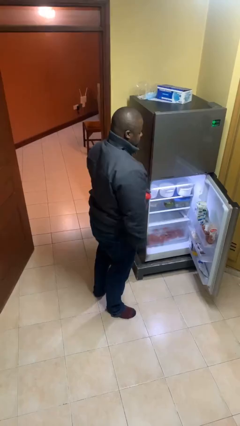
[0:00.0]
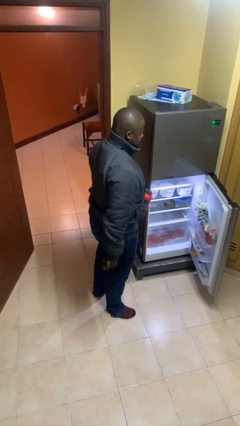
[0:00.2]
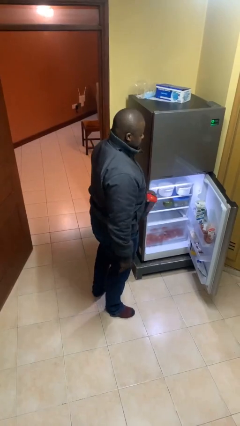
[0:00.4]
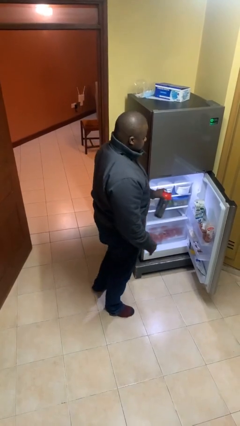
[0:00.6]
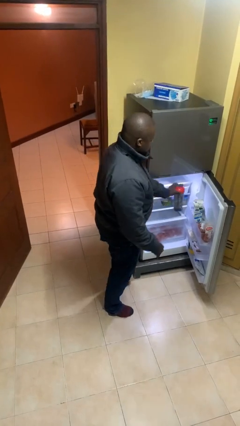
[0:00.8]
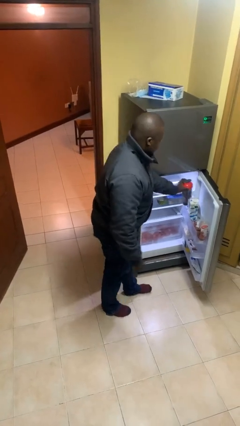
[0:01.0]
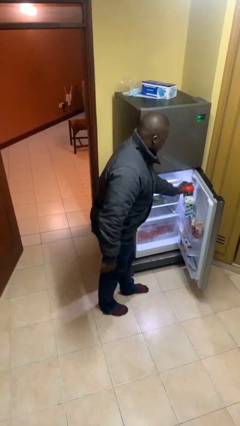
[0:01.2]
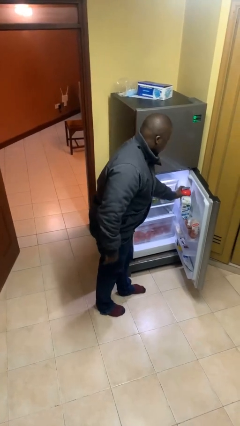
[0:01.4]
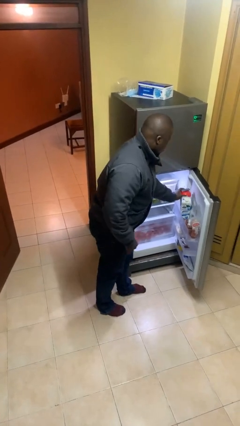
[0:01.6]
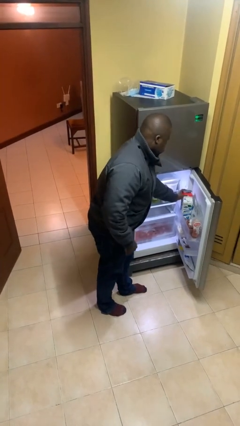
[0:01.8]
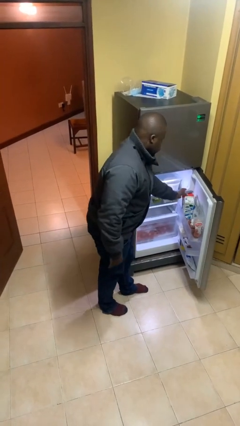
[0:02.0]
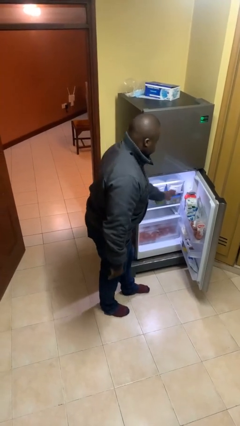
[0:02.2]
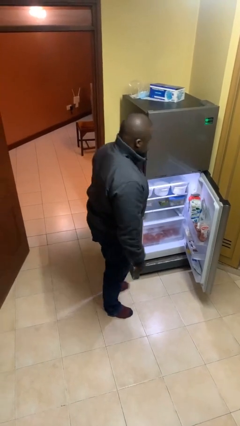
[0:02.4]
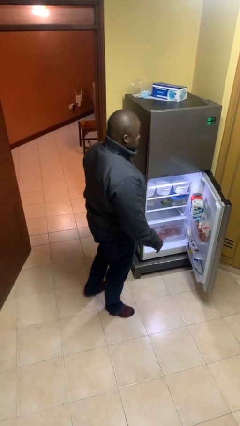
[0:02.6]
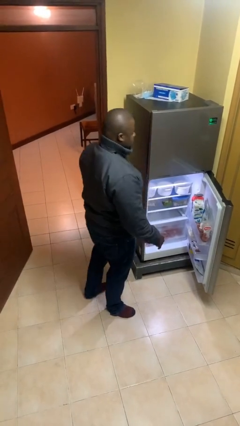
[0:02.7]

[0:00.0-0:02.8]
person puts object into refrigerator

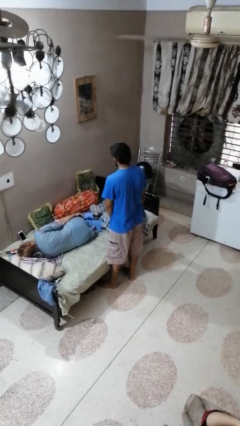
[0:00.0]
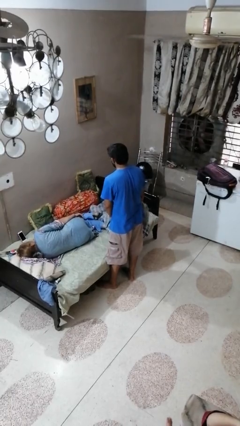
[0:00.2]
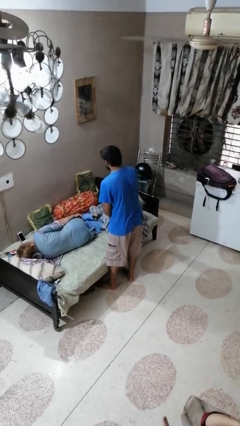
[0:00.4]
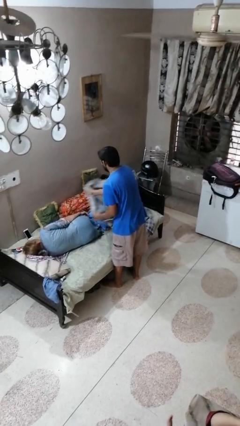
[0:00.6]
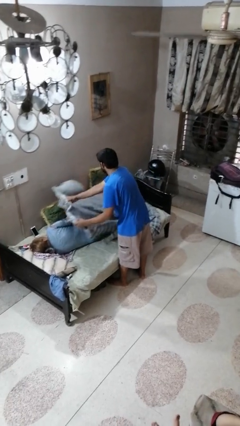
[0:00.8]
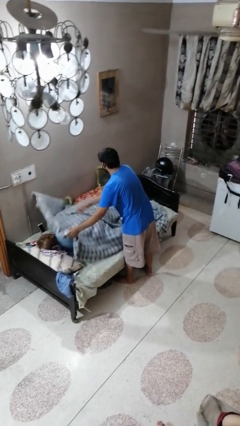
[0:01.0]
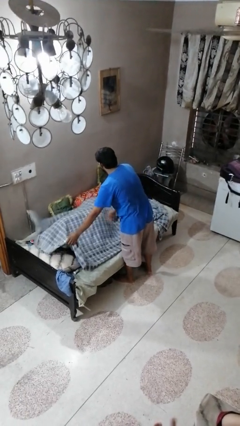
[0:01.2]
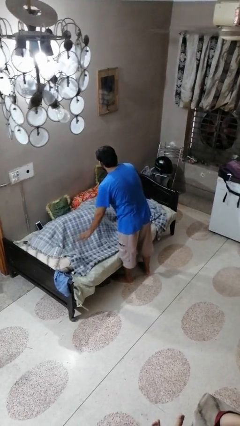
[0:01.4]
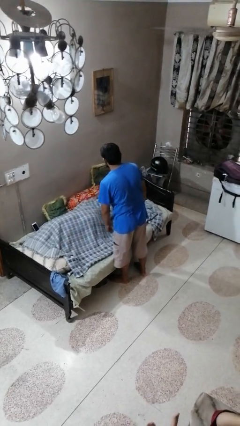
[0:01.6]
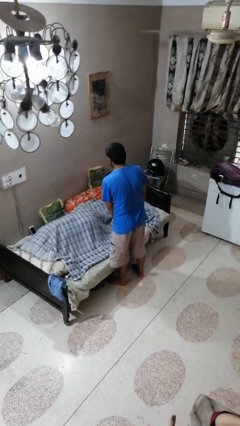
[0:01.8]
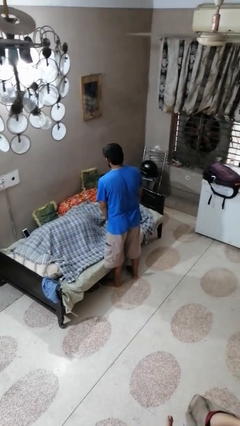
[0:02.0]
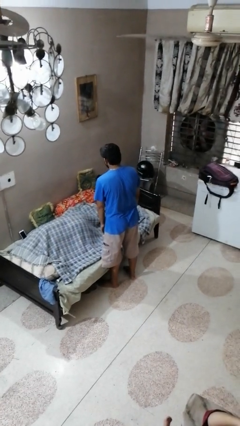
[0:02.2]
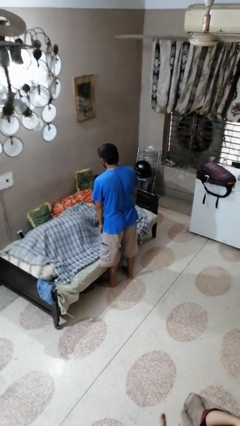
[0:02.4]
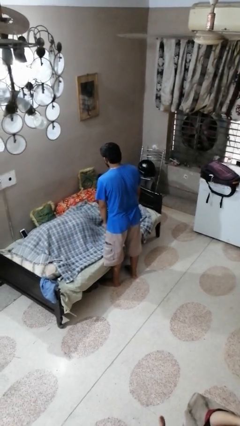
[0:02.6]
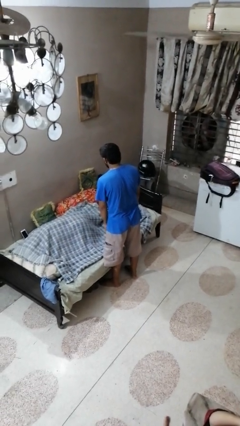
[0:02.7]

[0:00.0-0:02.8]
person covers friend with blanket

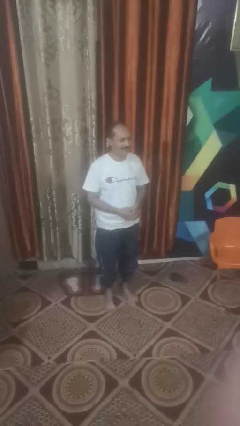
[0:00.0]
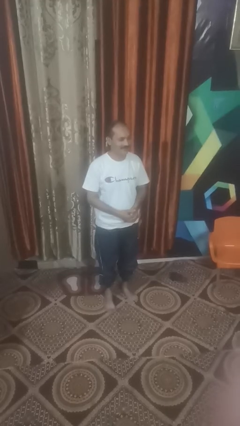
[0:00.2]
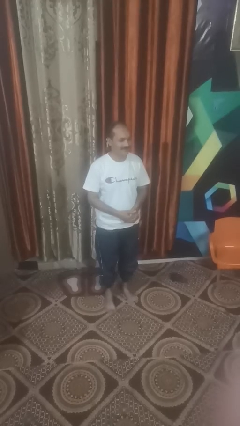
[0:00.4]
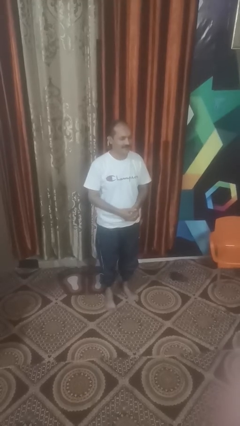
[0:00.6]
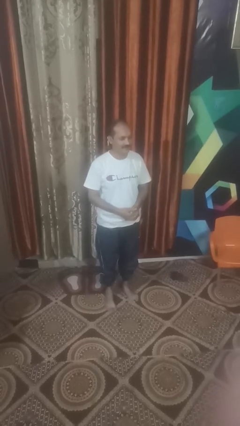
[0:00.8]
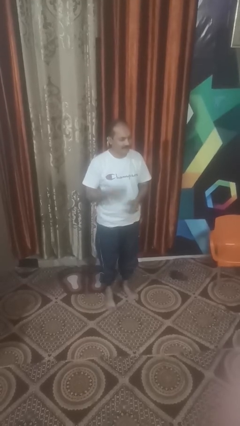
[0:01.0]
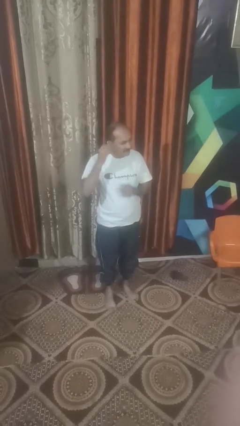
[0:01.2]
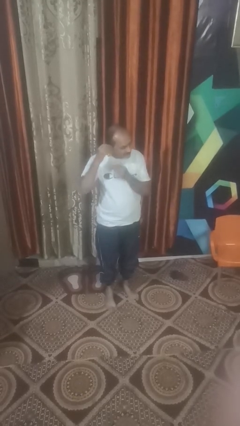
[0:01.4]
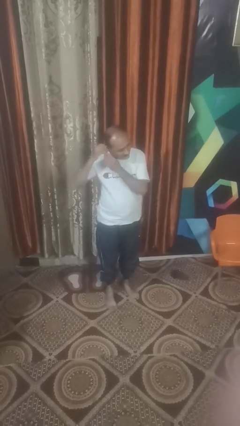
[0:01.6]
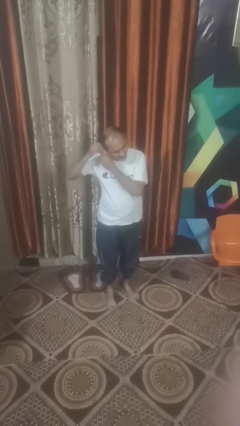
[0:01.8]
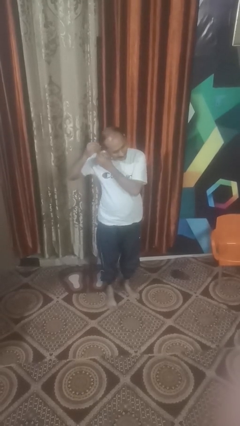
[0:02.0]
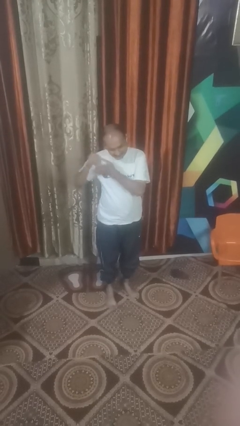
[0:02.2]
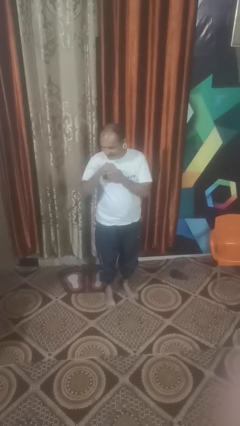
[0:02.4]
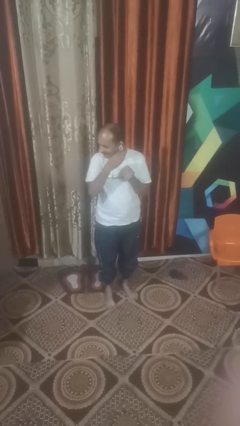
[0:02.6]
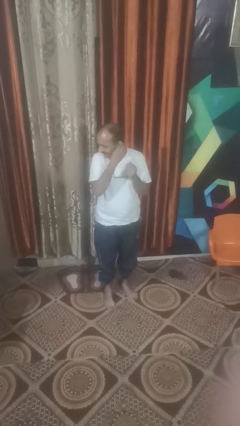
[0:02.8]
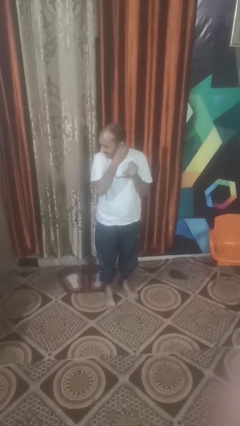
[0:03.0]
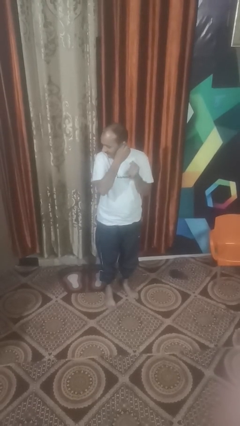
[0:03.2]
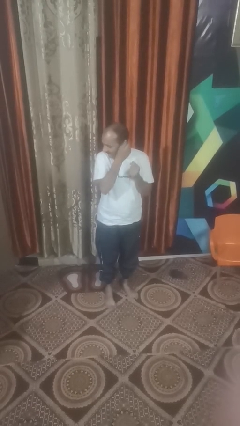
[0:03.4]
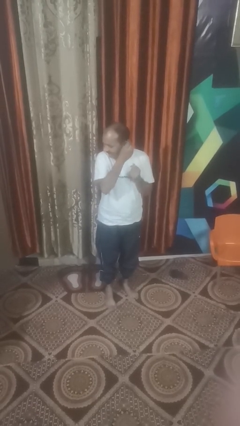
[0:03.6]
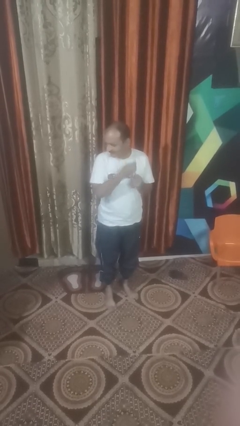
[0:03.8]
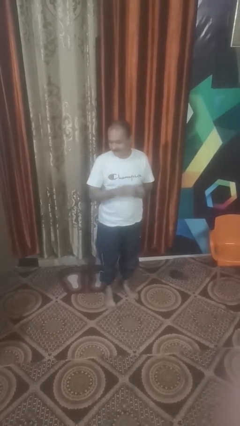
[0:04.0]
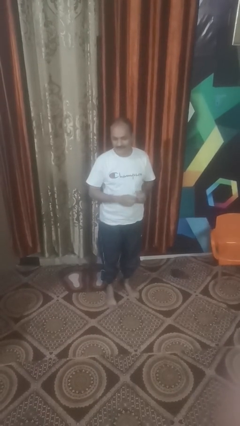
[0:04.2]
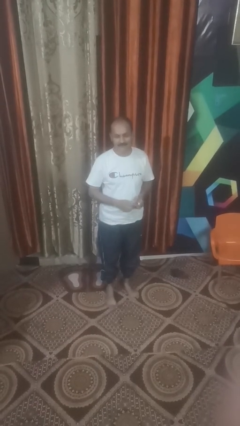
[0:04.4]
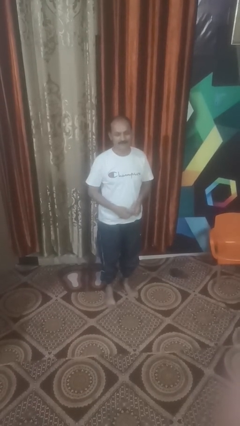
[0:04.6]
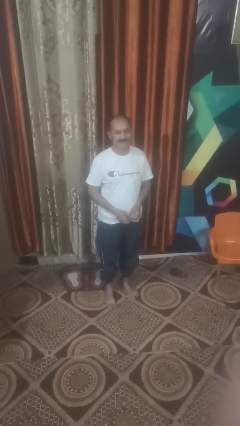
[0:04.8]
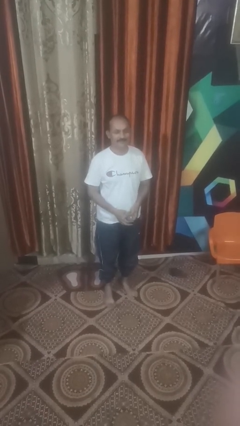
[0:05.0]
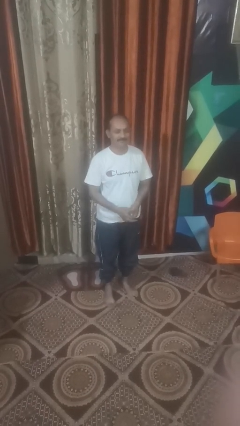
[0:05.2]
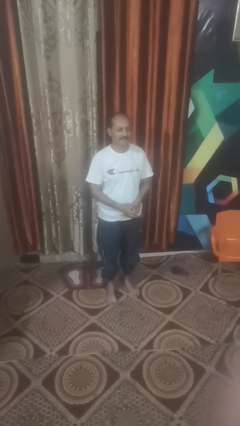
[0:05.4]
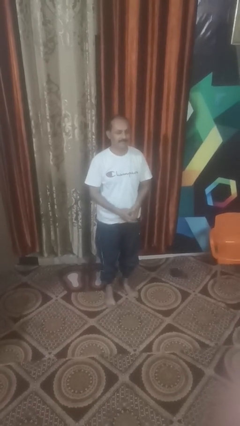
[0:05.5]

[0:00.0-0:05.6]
person takes off earrings

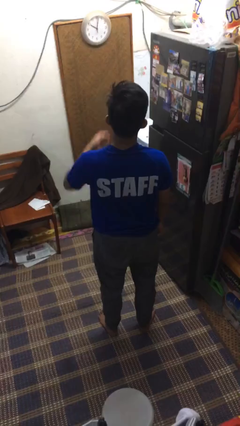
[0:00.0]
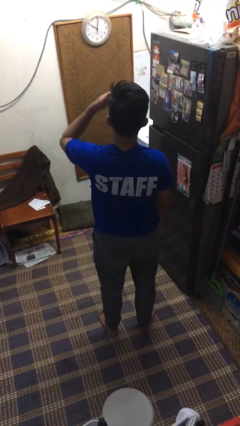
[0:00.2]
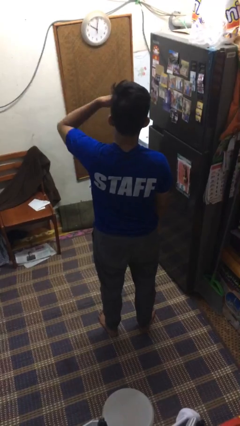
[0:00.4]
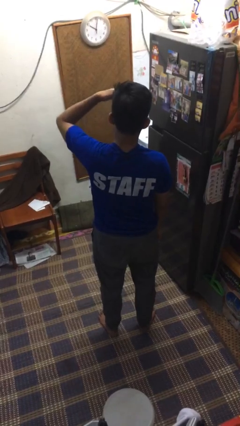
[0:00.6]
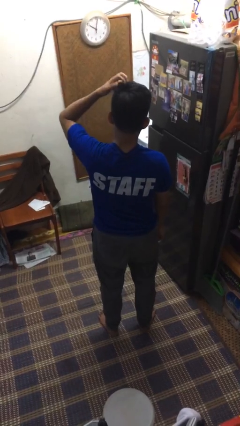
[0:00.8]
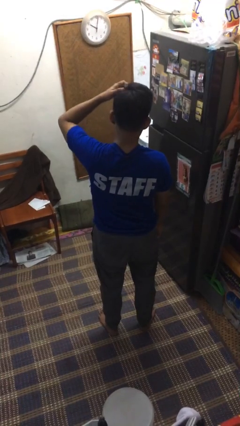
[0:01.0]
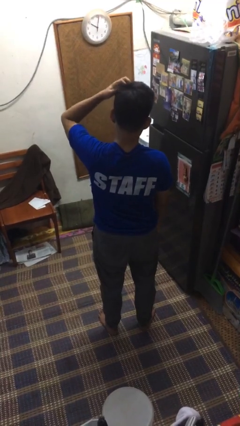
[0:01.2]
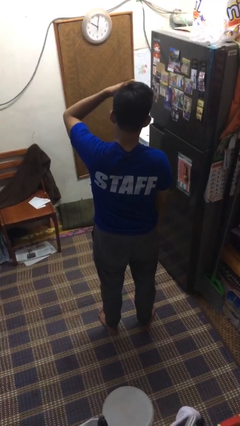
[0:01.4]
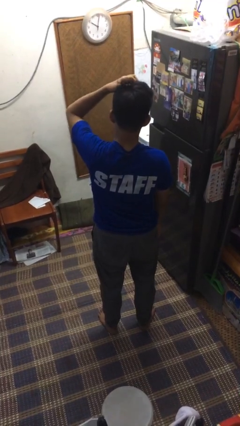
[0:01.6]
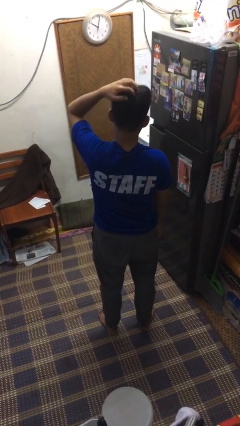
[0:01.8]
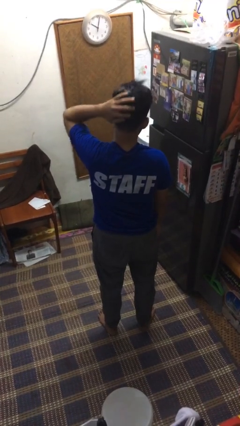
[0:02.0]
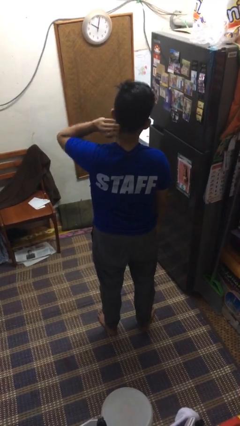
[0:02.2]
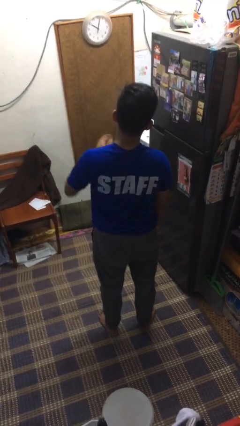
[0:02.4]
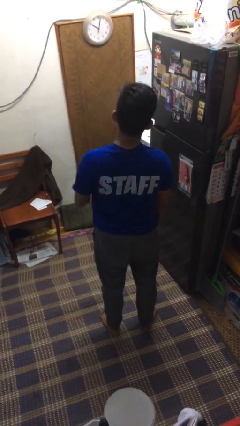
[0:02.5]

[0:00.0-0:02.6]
person scratches face

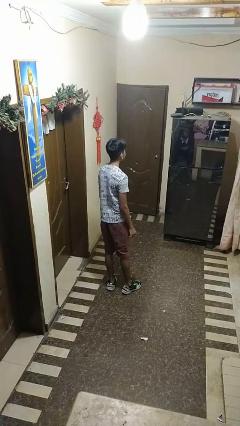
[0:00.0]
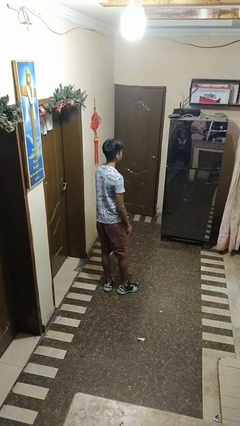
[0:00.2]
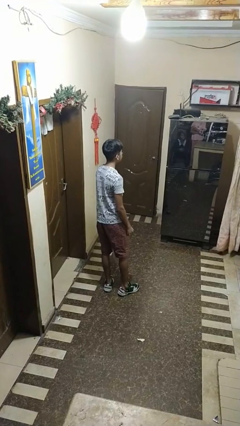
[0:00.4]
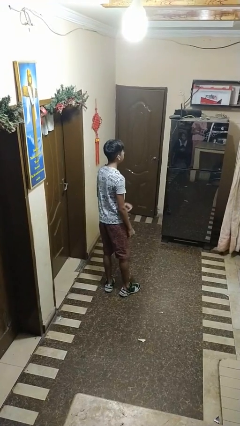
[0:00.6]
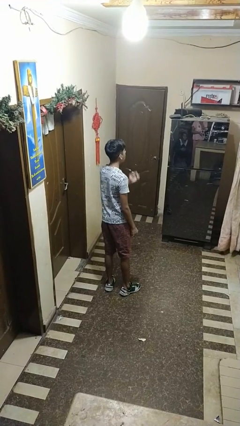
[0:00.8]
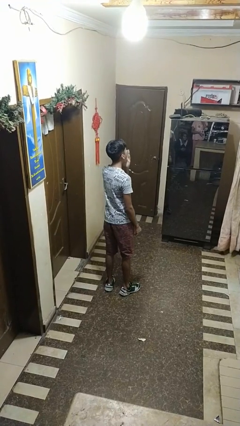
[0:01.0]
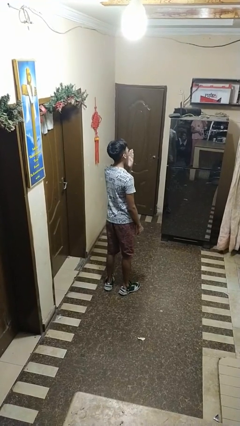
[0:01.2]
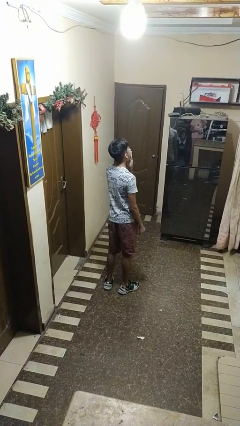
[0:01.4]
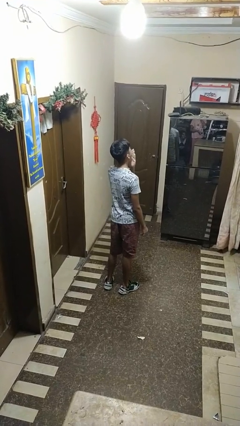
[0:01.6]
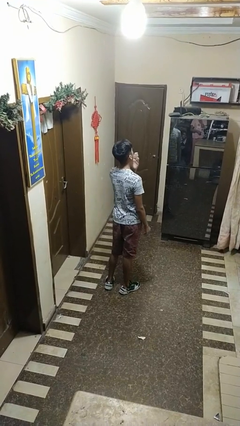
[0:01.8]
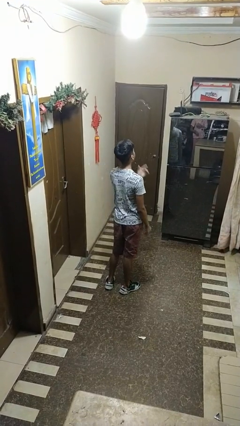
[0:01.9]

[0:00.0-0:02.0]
person yawns

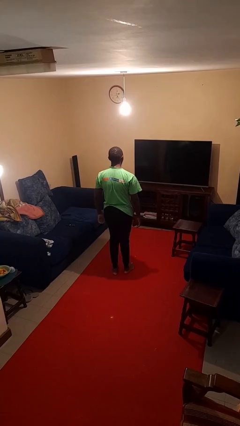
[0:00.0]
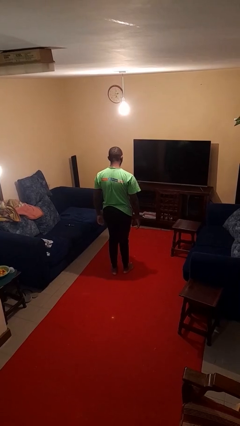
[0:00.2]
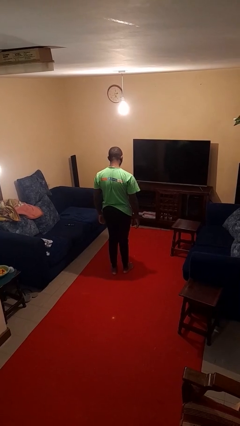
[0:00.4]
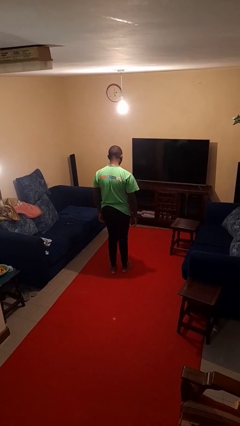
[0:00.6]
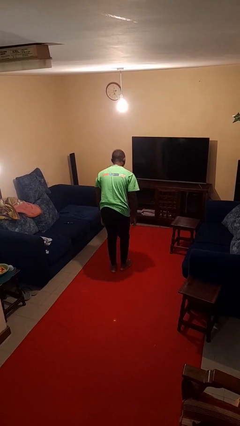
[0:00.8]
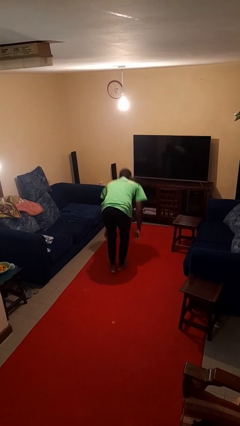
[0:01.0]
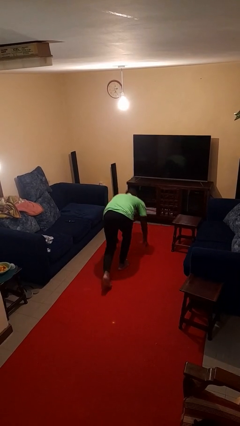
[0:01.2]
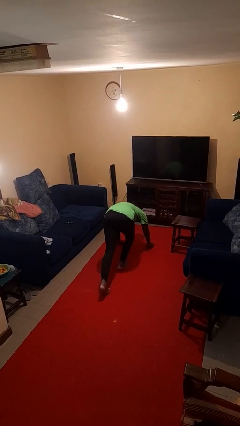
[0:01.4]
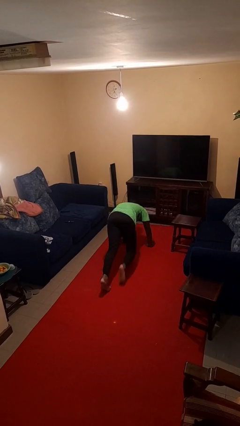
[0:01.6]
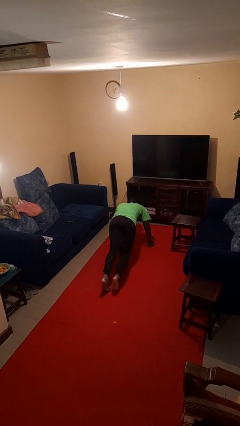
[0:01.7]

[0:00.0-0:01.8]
person exercises with plank

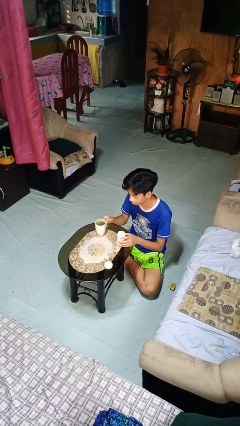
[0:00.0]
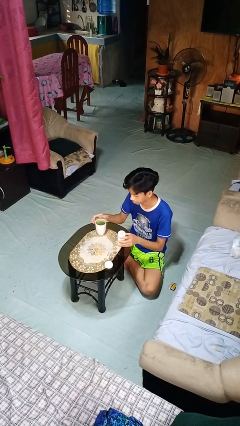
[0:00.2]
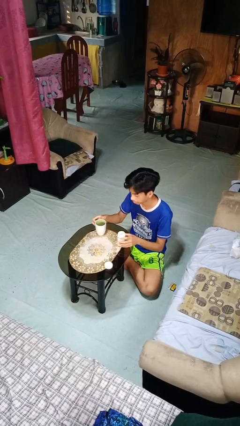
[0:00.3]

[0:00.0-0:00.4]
person drinks from cup
